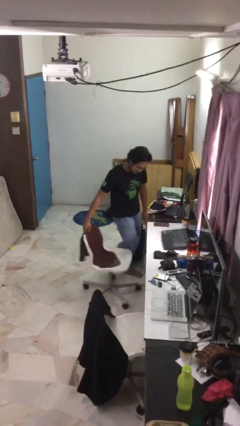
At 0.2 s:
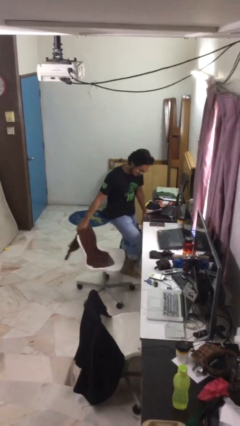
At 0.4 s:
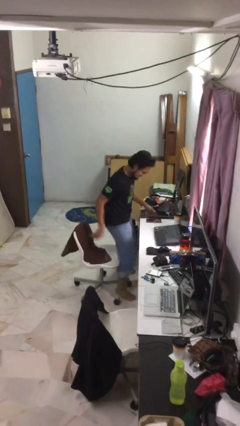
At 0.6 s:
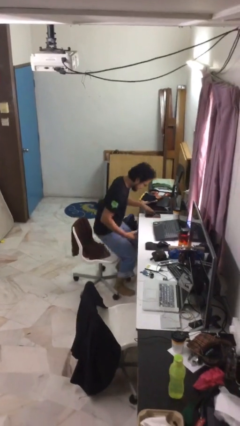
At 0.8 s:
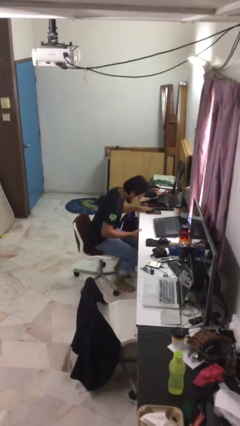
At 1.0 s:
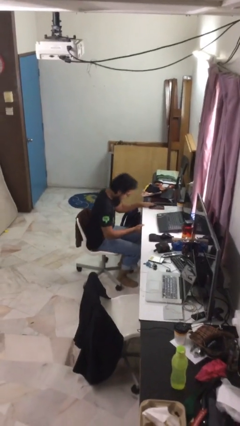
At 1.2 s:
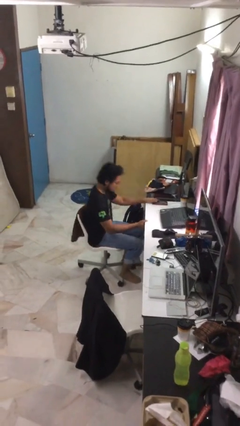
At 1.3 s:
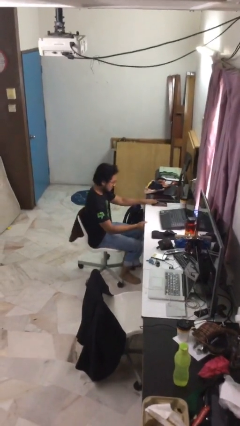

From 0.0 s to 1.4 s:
person sits down

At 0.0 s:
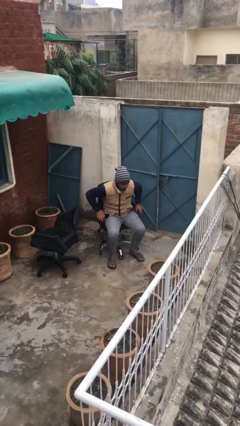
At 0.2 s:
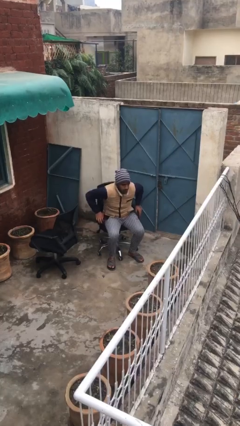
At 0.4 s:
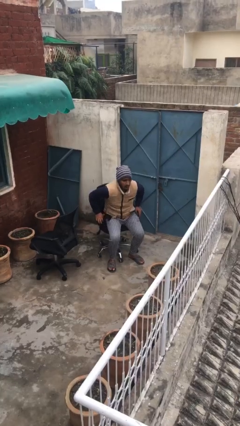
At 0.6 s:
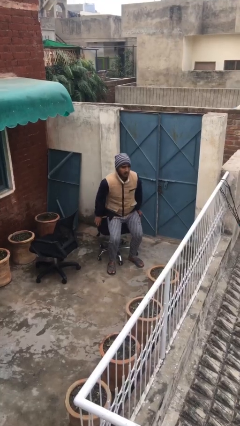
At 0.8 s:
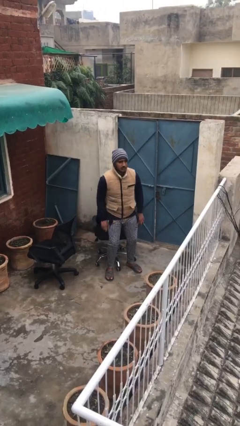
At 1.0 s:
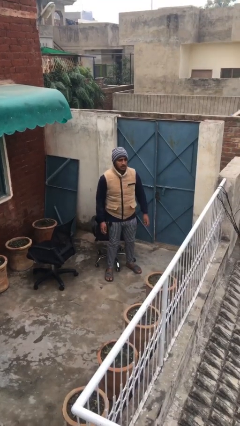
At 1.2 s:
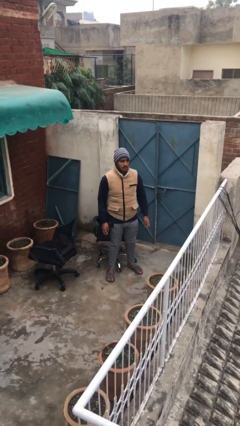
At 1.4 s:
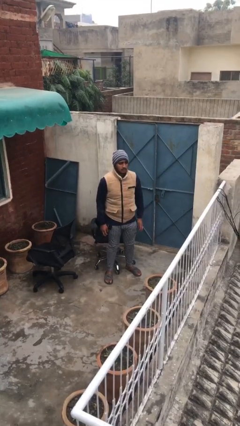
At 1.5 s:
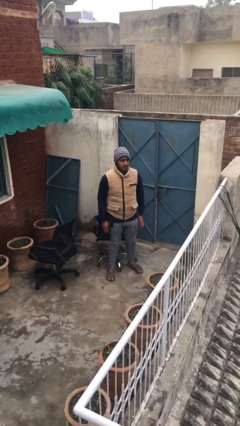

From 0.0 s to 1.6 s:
person stands up

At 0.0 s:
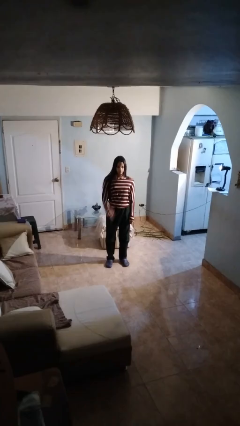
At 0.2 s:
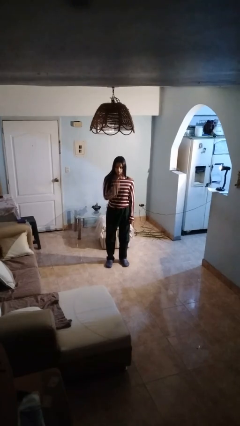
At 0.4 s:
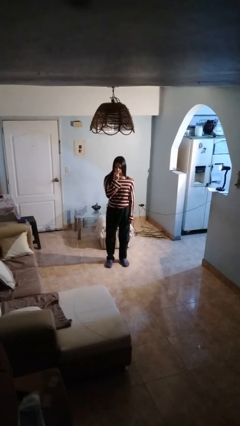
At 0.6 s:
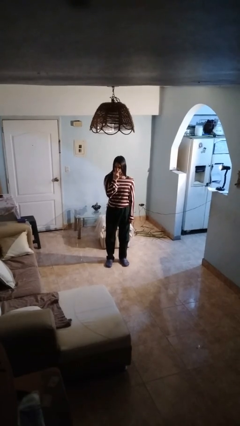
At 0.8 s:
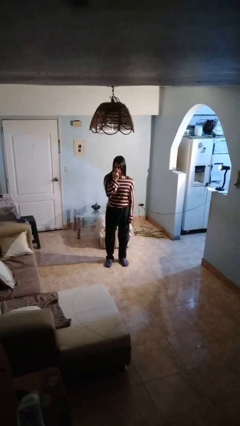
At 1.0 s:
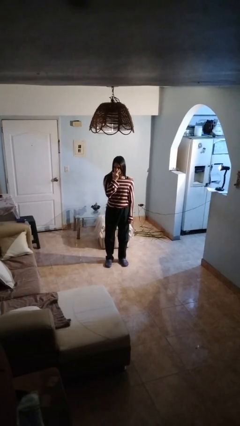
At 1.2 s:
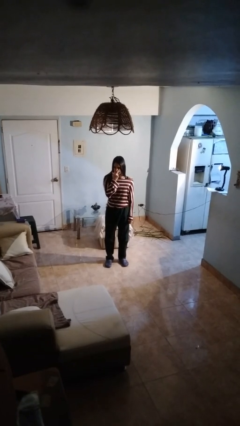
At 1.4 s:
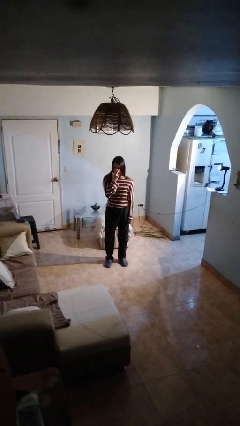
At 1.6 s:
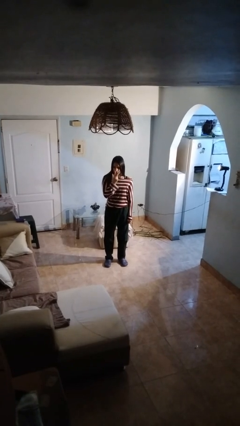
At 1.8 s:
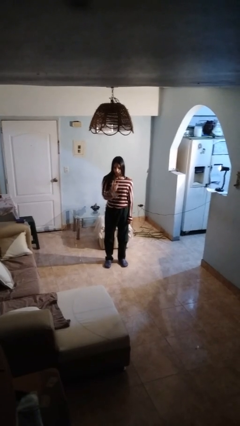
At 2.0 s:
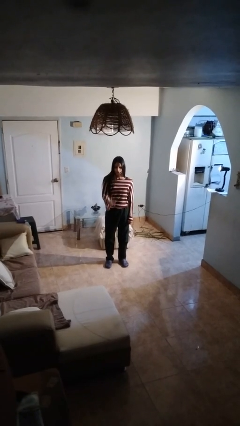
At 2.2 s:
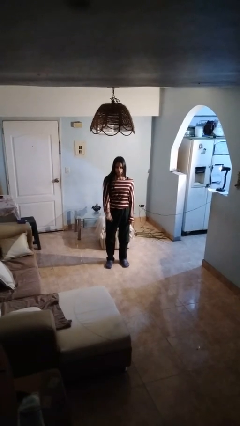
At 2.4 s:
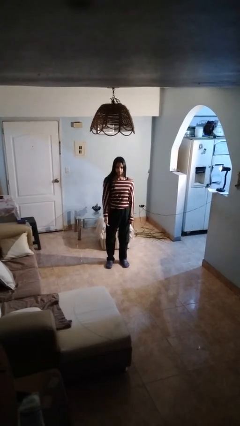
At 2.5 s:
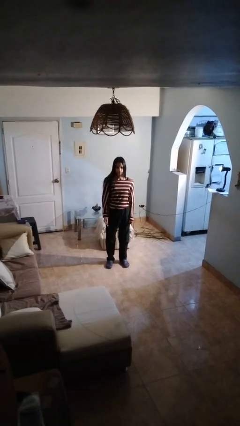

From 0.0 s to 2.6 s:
person gestures watch closely

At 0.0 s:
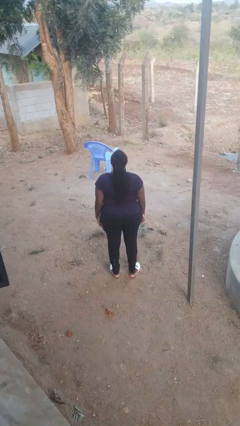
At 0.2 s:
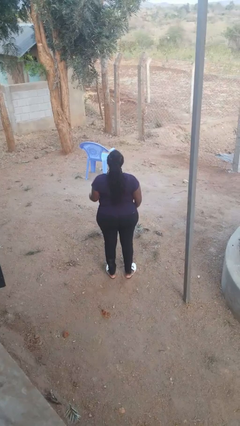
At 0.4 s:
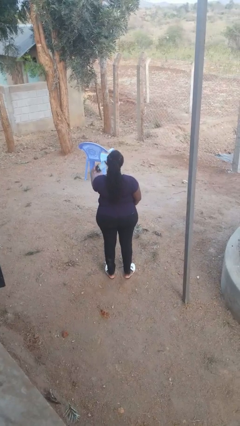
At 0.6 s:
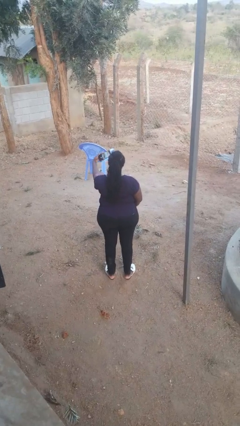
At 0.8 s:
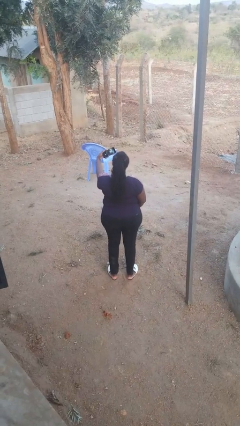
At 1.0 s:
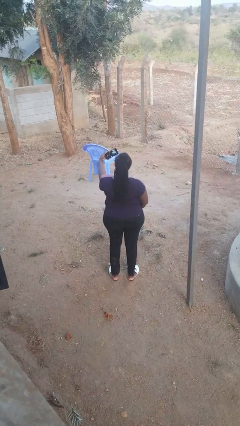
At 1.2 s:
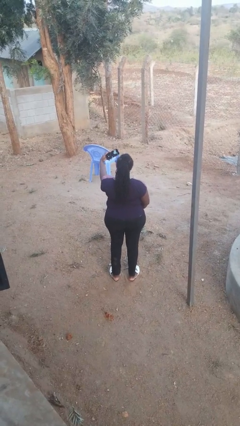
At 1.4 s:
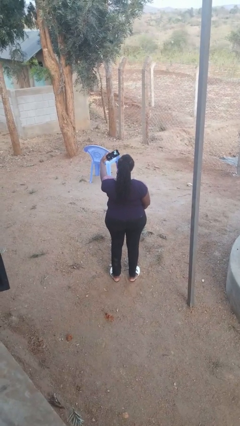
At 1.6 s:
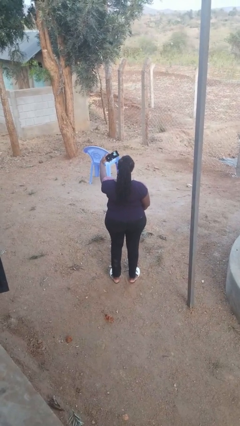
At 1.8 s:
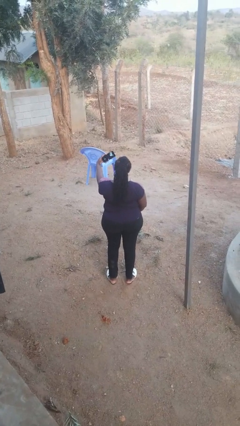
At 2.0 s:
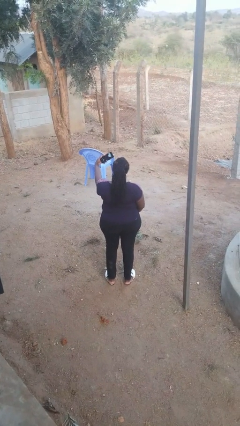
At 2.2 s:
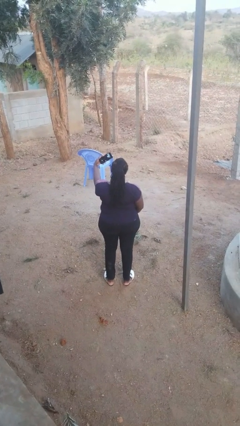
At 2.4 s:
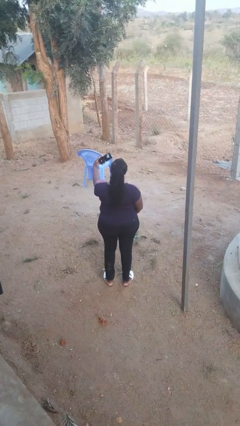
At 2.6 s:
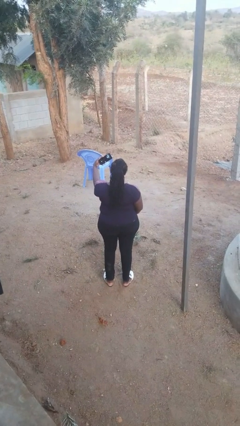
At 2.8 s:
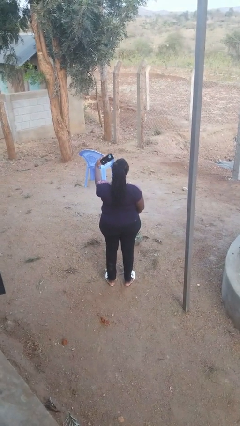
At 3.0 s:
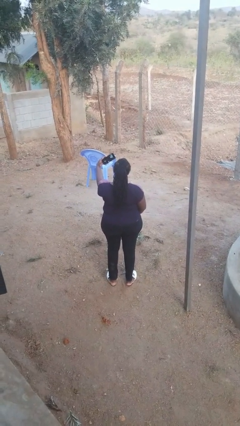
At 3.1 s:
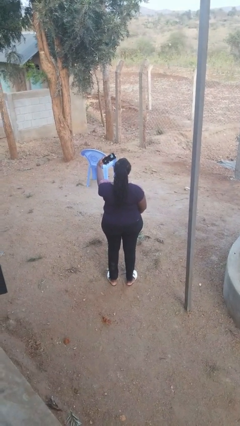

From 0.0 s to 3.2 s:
person takes selfie

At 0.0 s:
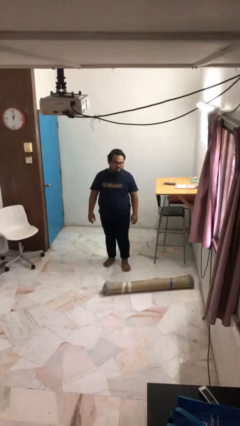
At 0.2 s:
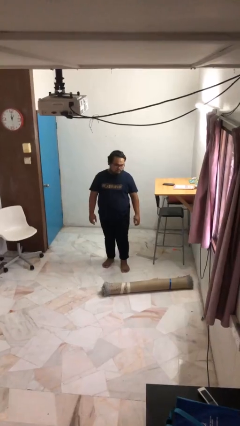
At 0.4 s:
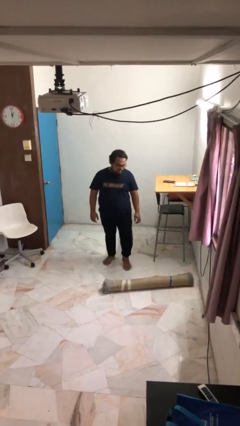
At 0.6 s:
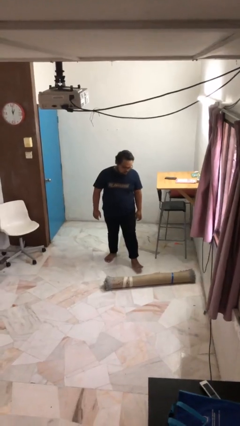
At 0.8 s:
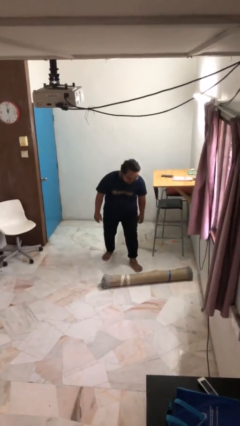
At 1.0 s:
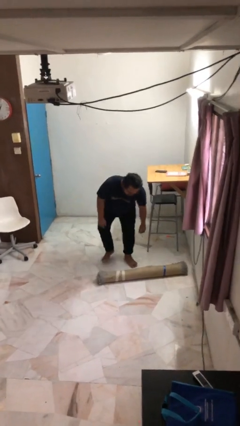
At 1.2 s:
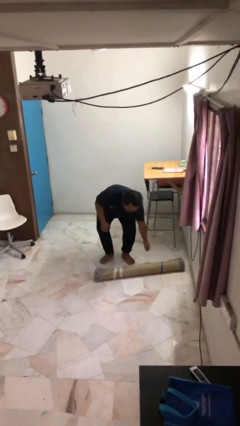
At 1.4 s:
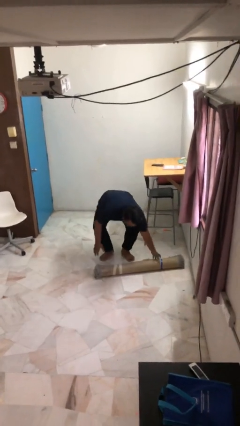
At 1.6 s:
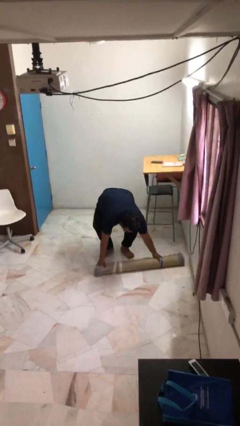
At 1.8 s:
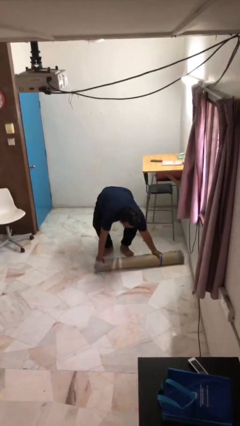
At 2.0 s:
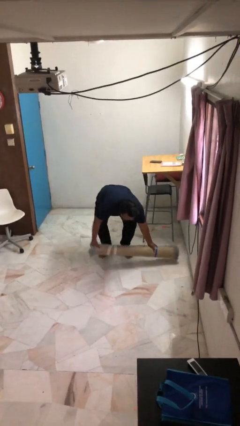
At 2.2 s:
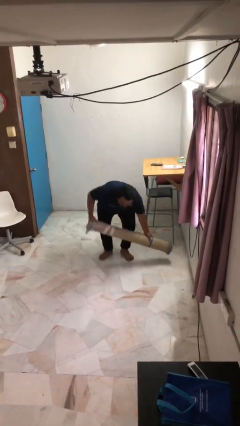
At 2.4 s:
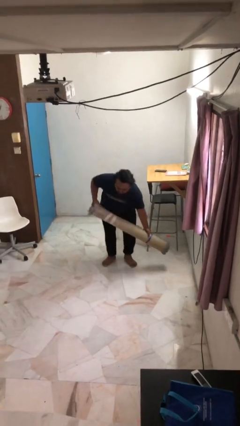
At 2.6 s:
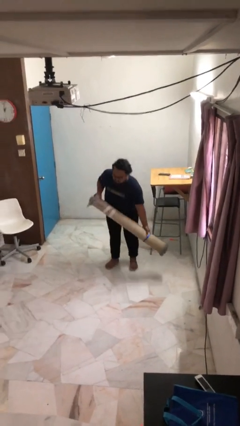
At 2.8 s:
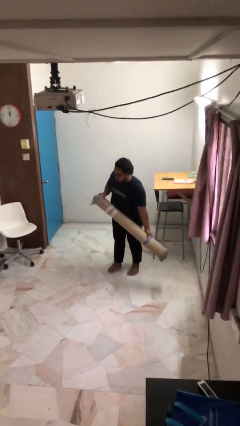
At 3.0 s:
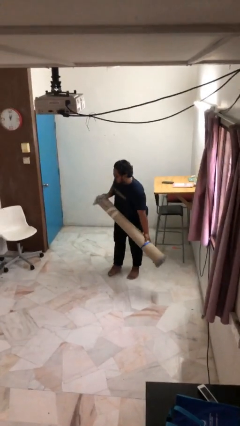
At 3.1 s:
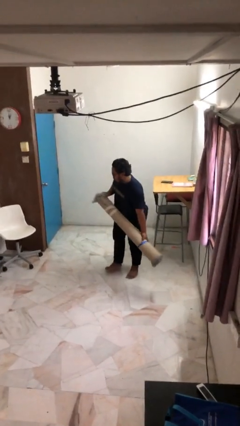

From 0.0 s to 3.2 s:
person picks up object from floor

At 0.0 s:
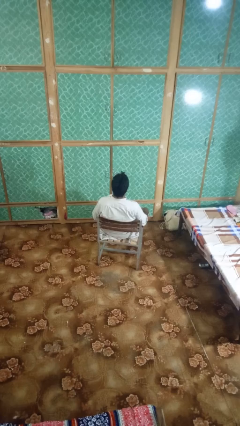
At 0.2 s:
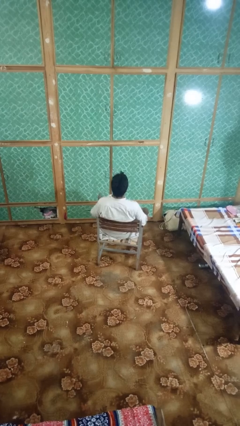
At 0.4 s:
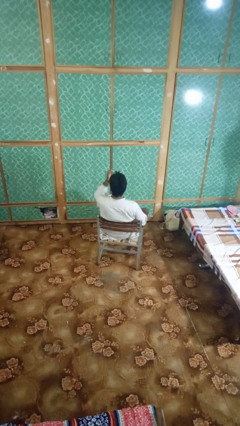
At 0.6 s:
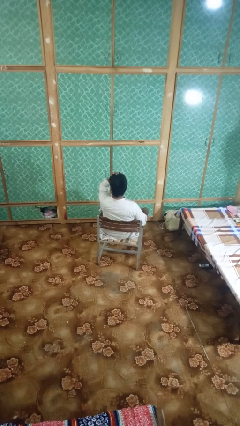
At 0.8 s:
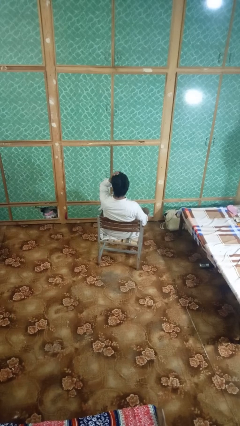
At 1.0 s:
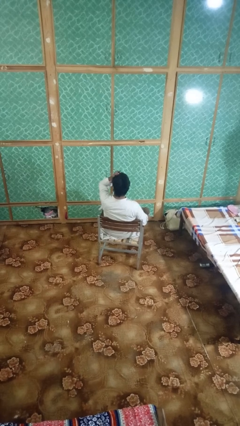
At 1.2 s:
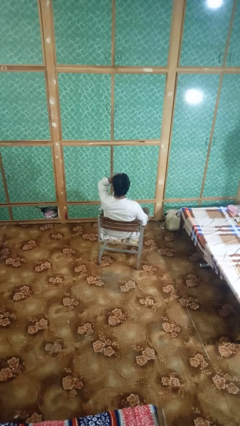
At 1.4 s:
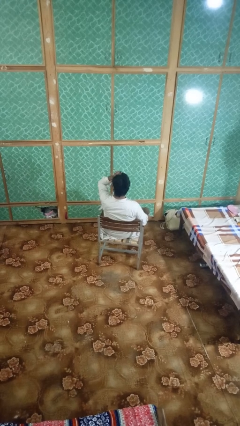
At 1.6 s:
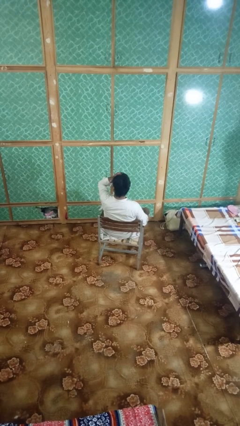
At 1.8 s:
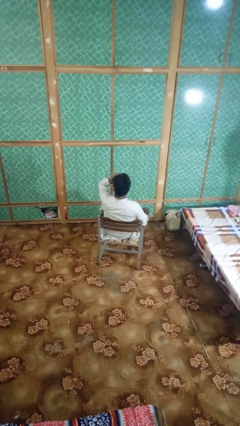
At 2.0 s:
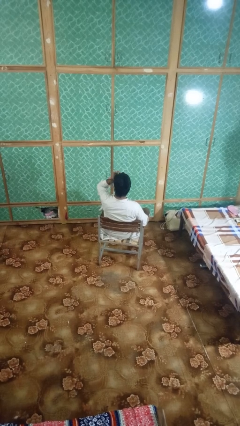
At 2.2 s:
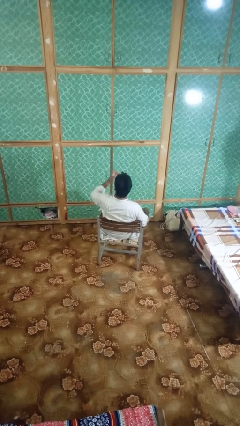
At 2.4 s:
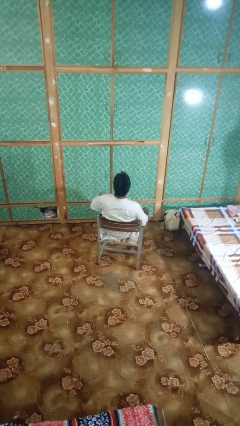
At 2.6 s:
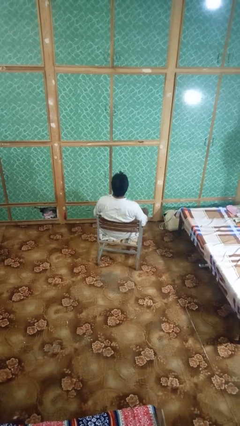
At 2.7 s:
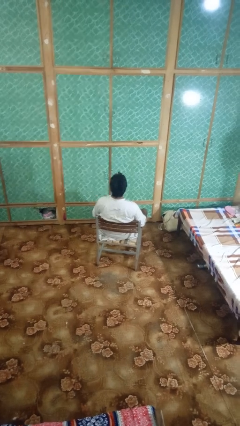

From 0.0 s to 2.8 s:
person rubs eyes

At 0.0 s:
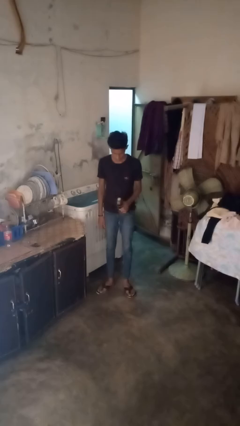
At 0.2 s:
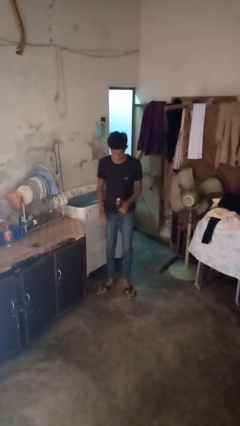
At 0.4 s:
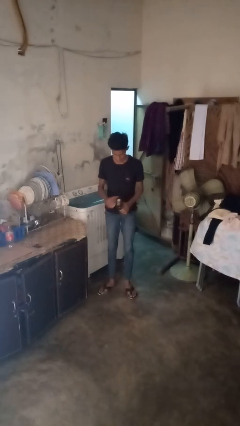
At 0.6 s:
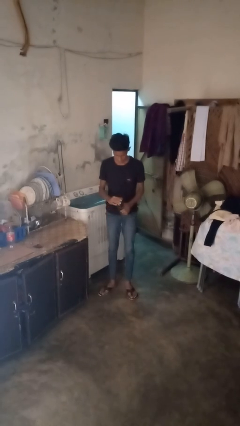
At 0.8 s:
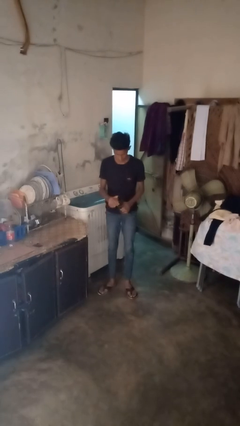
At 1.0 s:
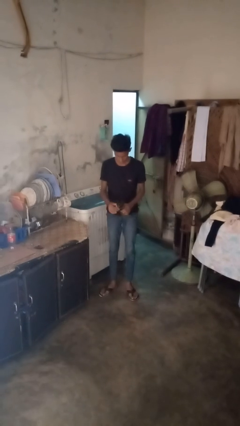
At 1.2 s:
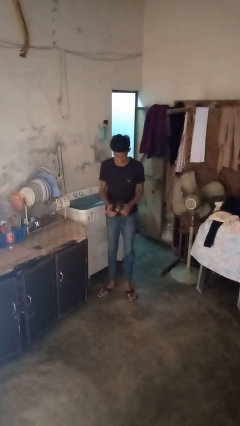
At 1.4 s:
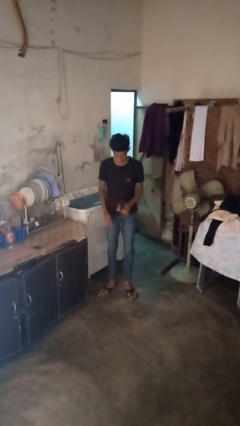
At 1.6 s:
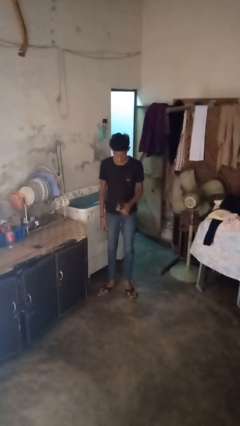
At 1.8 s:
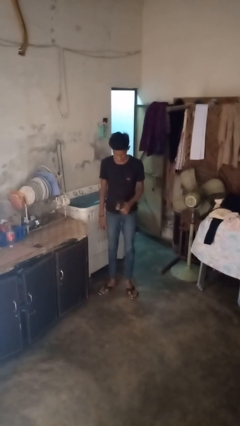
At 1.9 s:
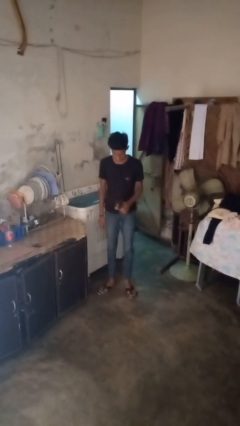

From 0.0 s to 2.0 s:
person opens can with can opener
